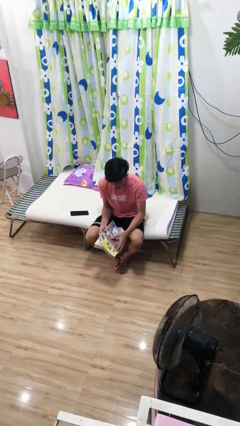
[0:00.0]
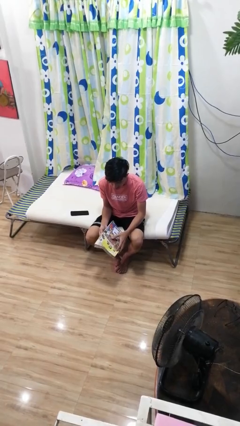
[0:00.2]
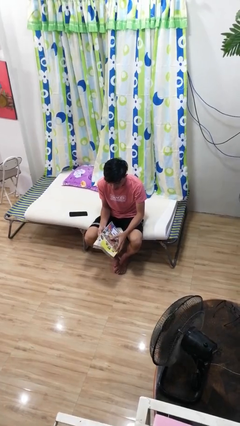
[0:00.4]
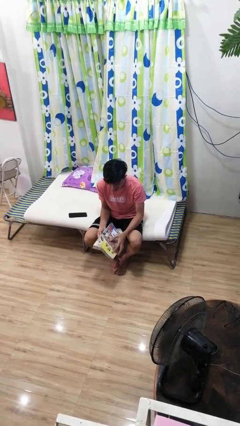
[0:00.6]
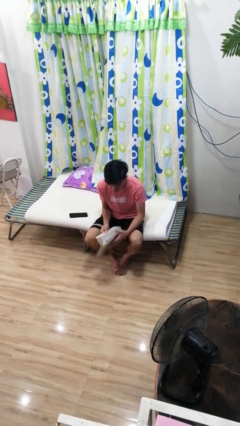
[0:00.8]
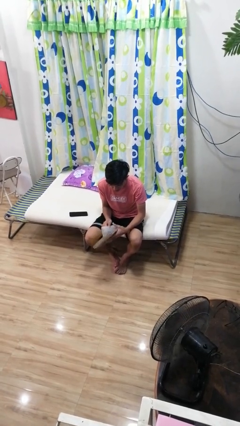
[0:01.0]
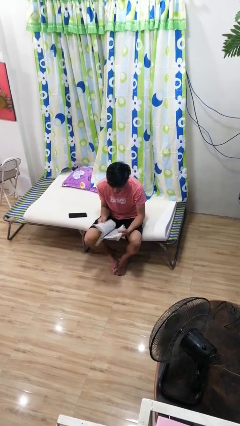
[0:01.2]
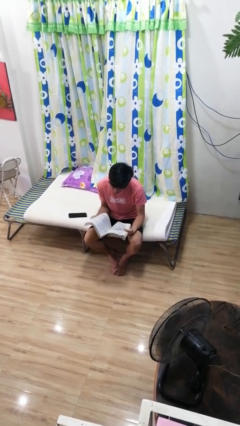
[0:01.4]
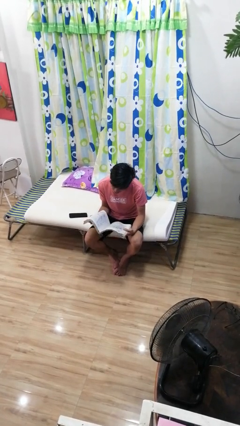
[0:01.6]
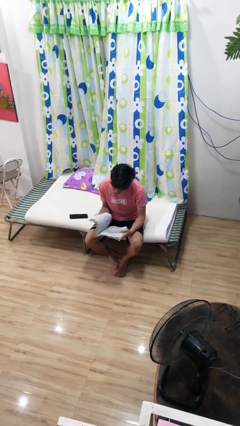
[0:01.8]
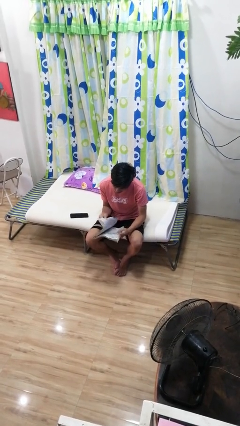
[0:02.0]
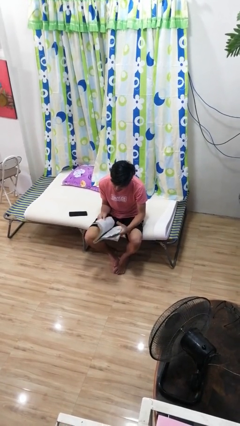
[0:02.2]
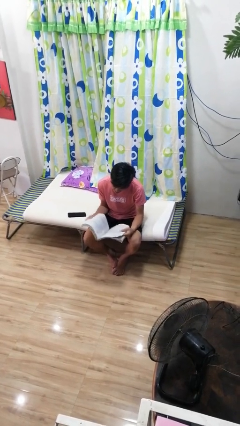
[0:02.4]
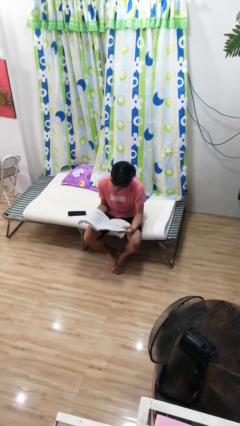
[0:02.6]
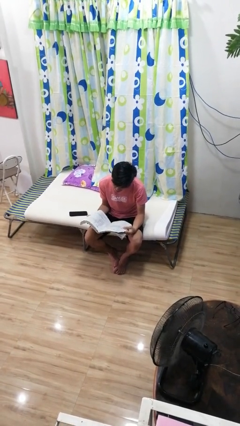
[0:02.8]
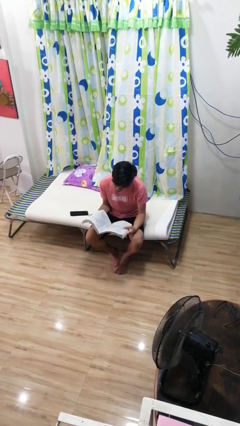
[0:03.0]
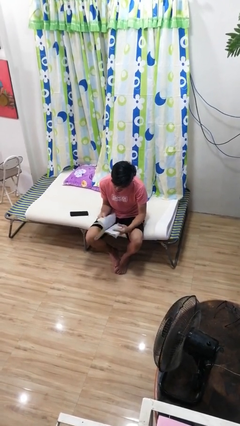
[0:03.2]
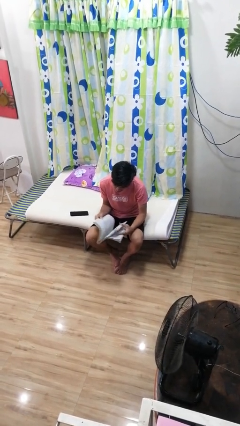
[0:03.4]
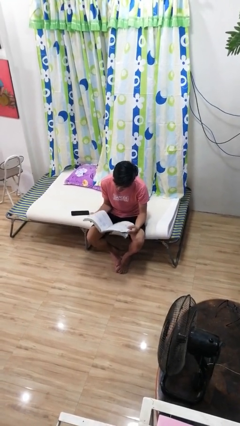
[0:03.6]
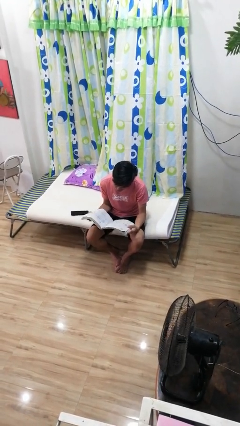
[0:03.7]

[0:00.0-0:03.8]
person reads book

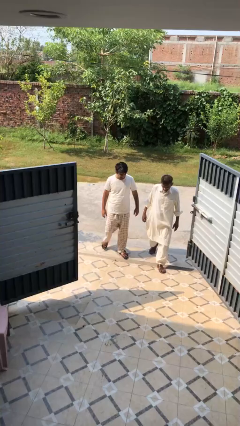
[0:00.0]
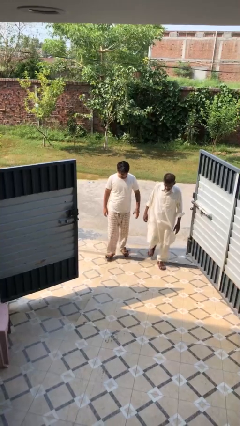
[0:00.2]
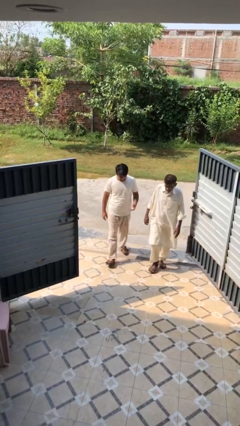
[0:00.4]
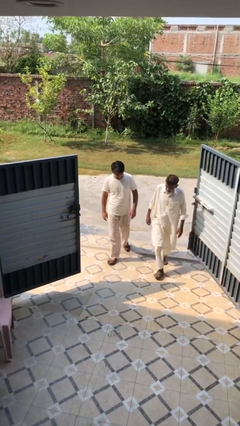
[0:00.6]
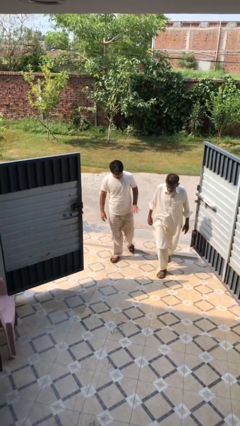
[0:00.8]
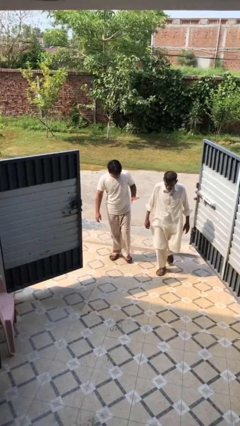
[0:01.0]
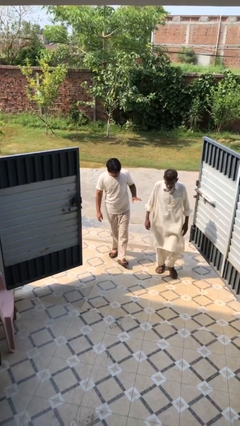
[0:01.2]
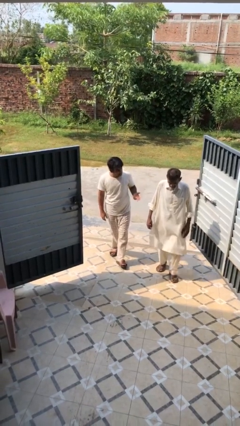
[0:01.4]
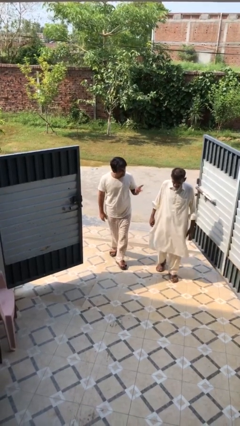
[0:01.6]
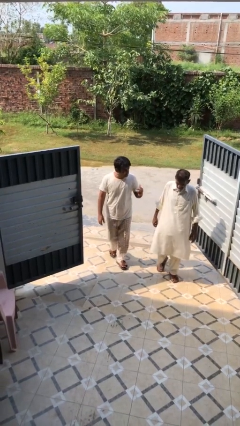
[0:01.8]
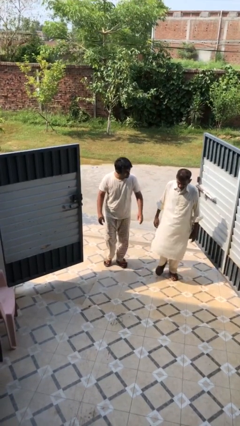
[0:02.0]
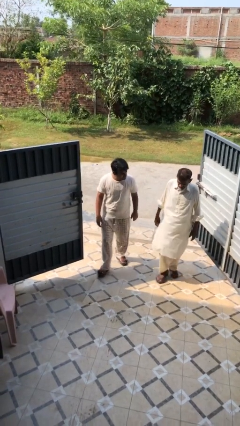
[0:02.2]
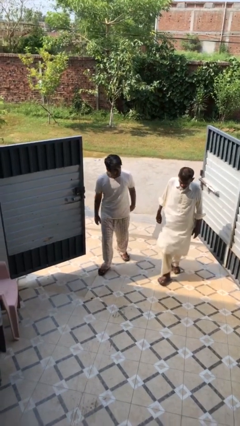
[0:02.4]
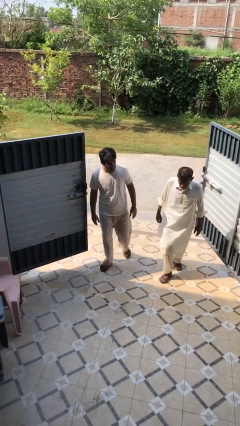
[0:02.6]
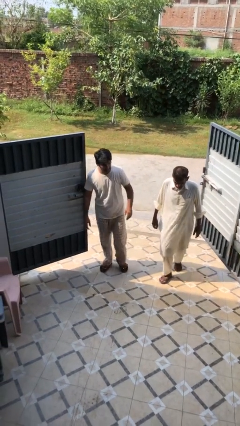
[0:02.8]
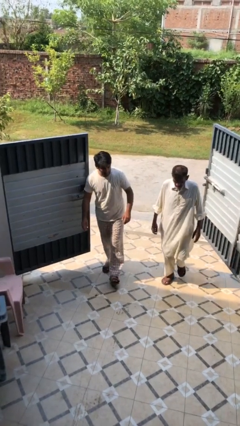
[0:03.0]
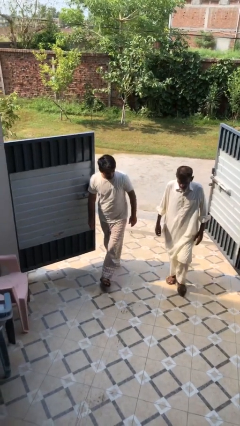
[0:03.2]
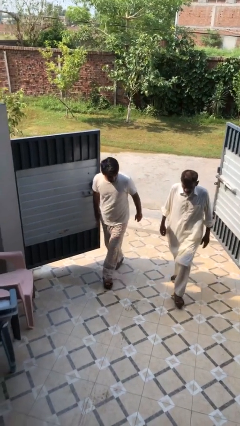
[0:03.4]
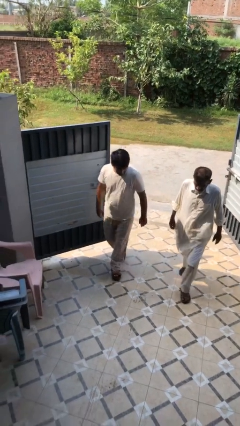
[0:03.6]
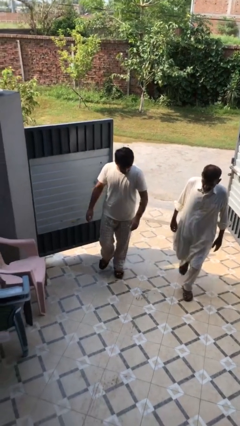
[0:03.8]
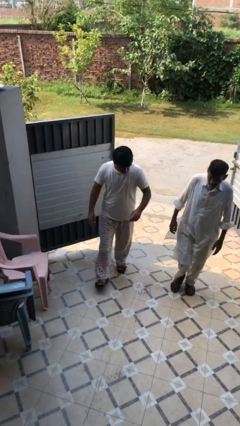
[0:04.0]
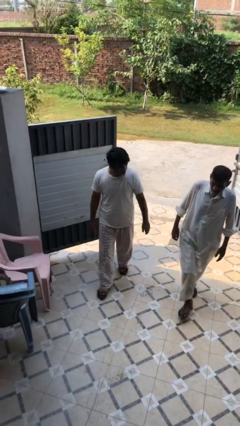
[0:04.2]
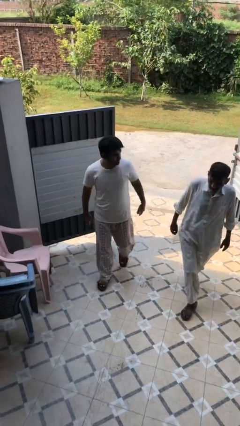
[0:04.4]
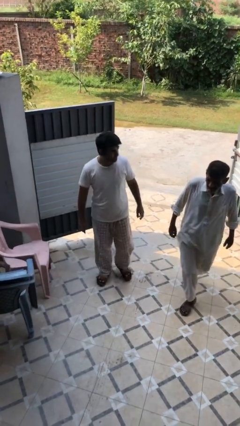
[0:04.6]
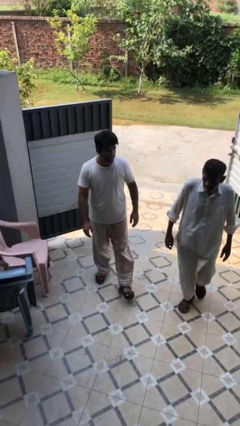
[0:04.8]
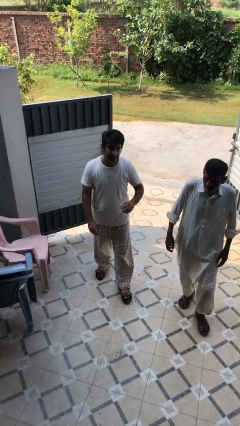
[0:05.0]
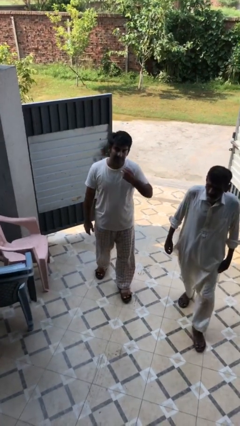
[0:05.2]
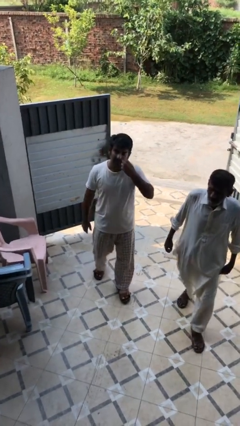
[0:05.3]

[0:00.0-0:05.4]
person talks to person

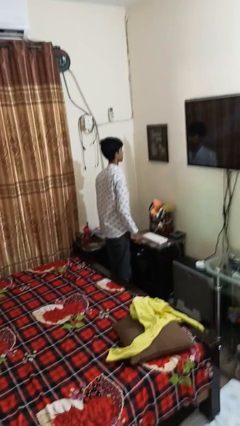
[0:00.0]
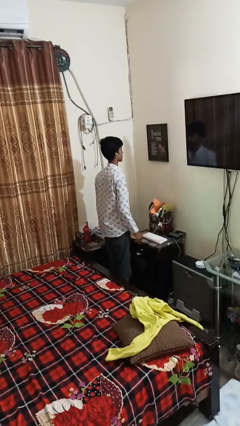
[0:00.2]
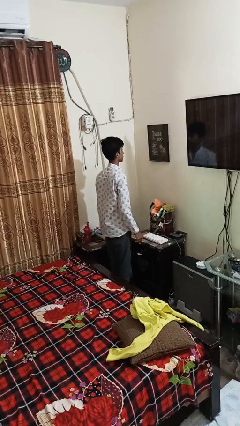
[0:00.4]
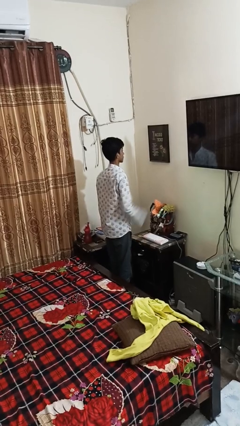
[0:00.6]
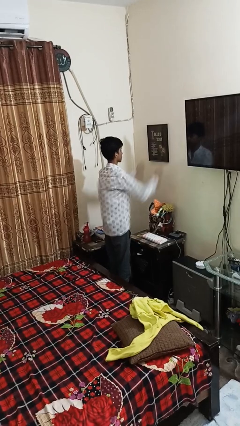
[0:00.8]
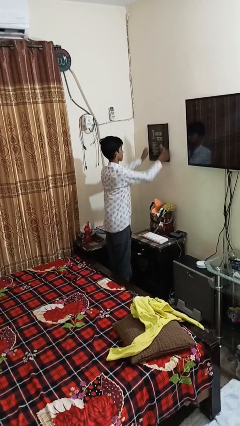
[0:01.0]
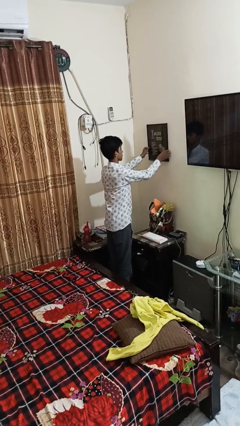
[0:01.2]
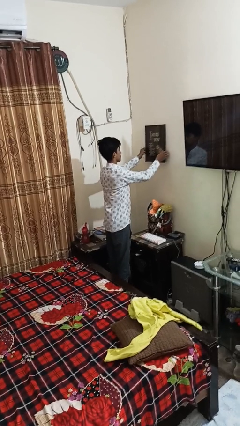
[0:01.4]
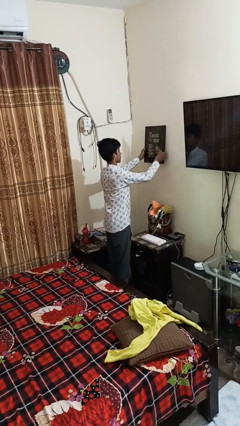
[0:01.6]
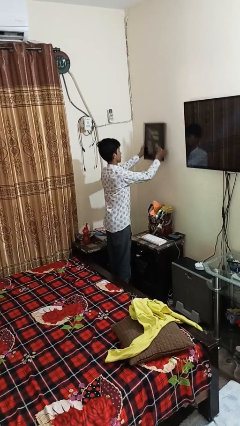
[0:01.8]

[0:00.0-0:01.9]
person takes down picture frame

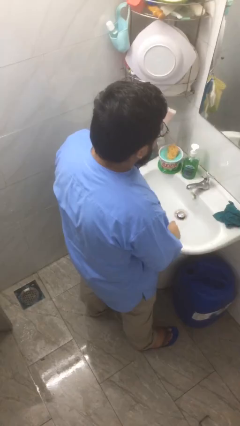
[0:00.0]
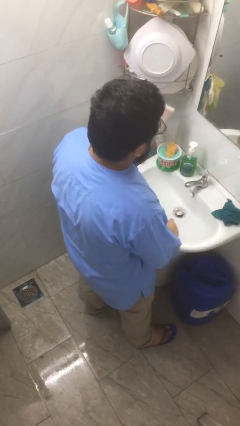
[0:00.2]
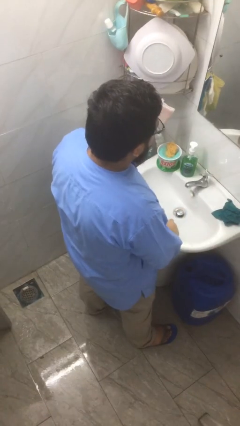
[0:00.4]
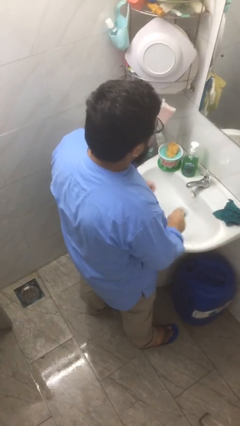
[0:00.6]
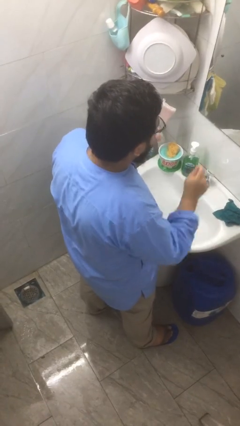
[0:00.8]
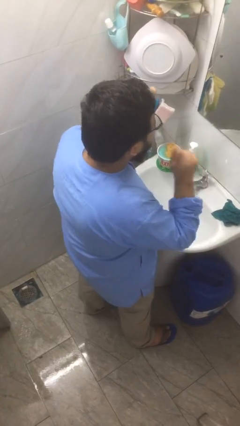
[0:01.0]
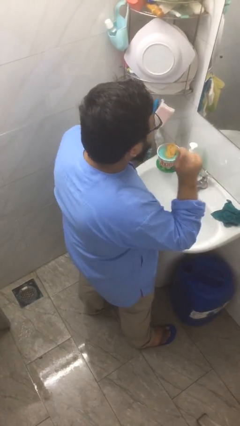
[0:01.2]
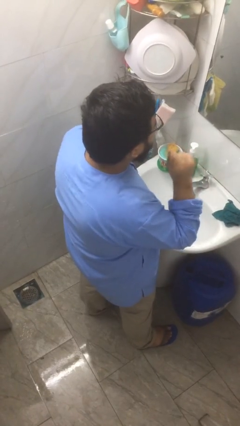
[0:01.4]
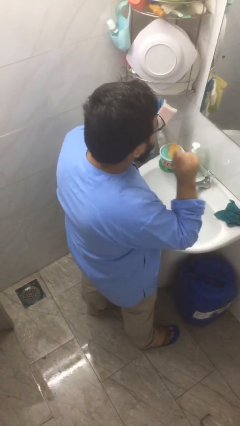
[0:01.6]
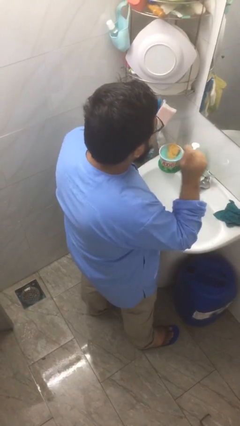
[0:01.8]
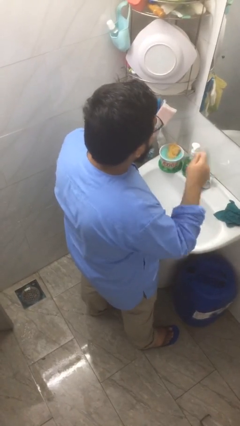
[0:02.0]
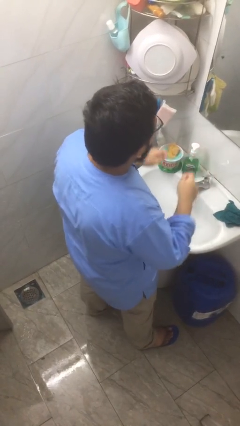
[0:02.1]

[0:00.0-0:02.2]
person flosses

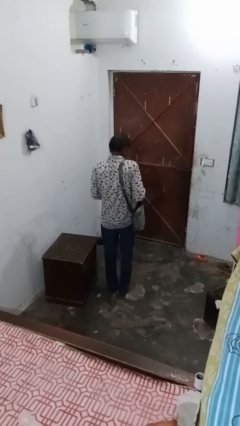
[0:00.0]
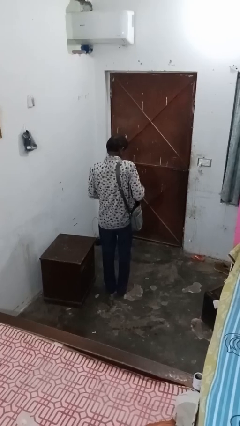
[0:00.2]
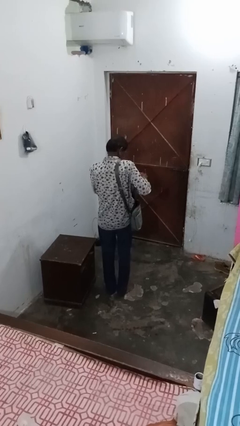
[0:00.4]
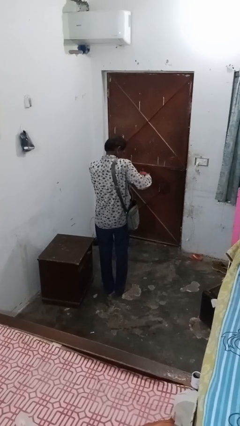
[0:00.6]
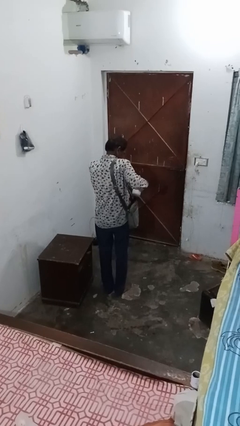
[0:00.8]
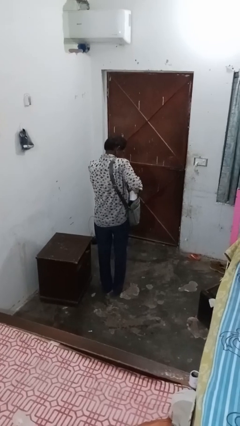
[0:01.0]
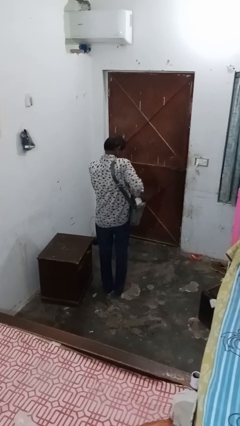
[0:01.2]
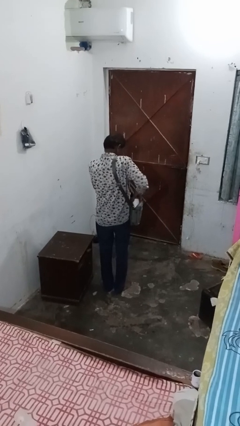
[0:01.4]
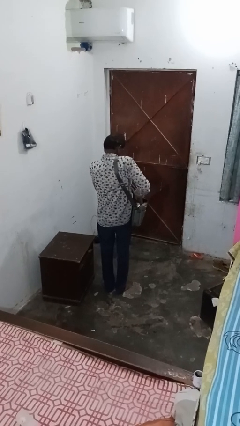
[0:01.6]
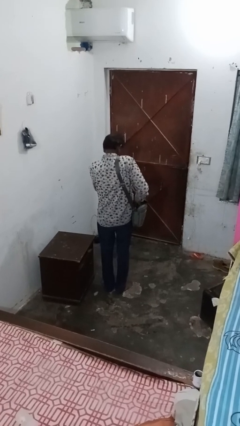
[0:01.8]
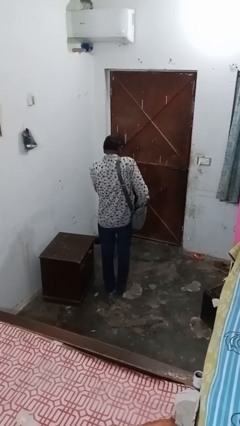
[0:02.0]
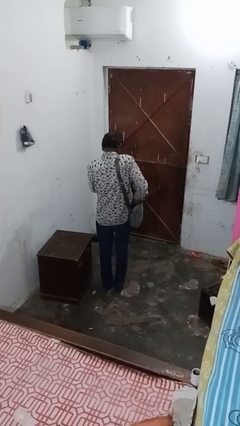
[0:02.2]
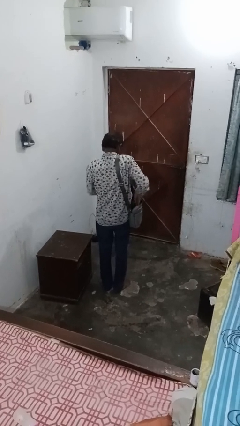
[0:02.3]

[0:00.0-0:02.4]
person puts object into bag

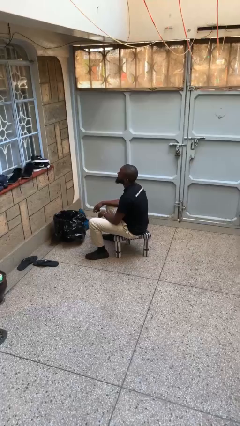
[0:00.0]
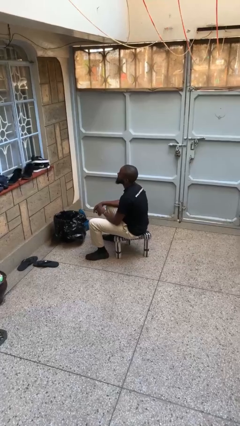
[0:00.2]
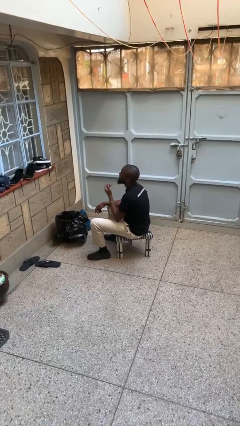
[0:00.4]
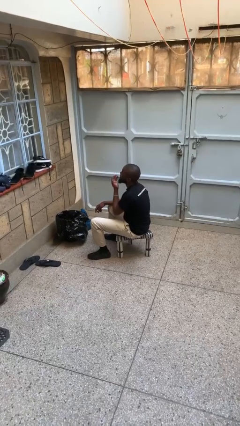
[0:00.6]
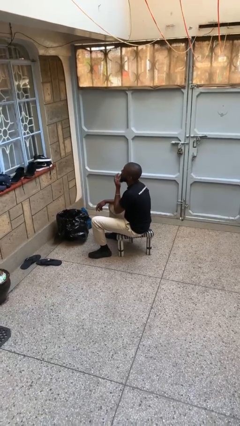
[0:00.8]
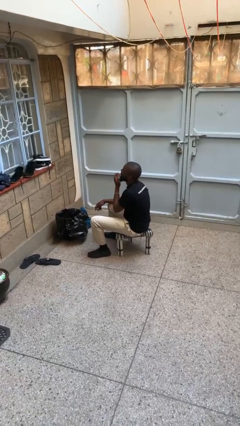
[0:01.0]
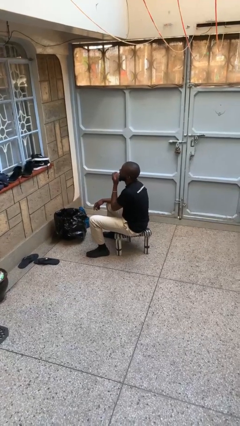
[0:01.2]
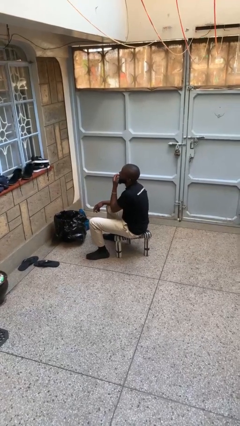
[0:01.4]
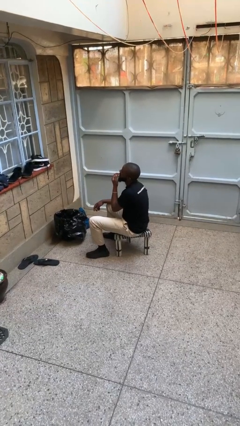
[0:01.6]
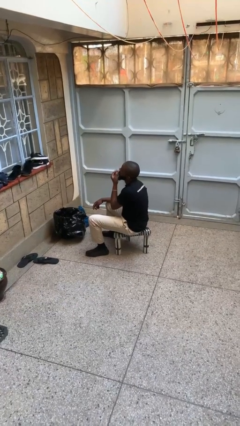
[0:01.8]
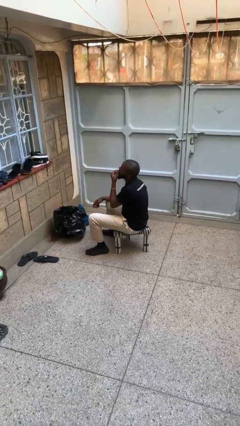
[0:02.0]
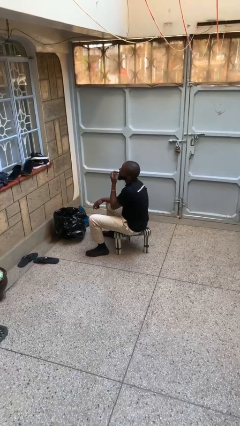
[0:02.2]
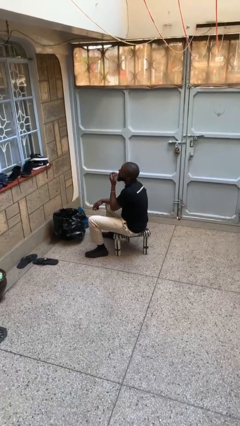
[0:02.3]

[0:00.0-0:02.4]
person licks fingers
